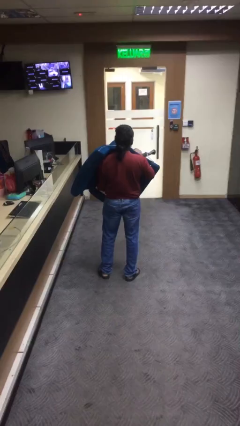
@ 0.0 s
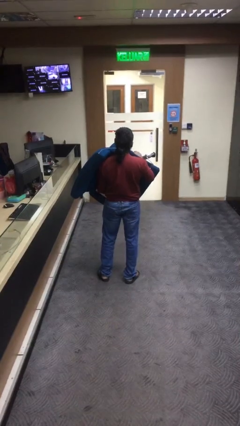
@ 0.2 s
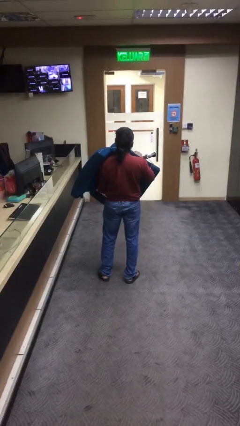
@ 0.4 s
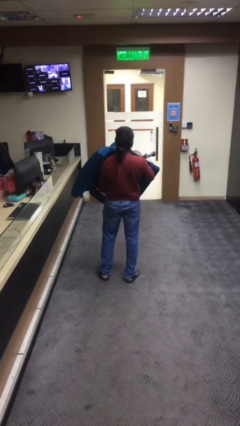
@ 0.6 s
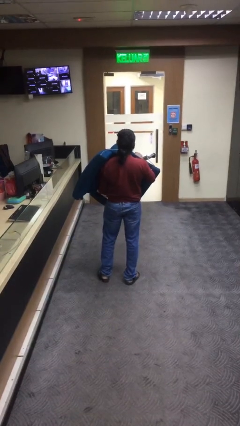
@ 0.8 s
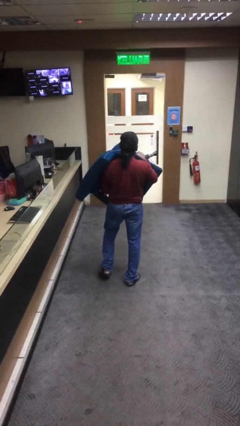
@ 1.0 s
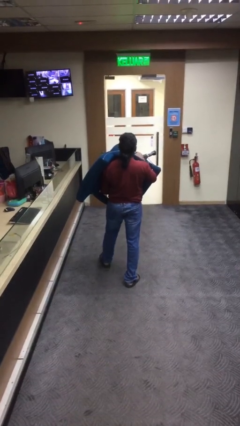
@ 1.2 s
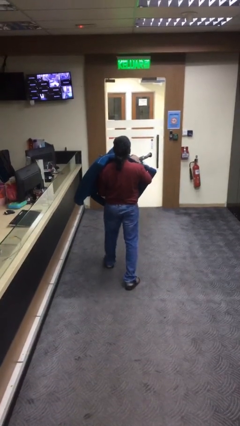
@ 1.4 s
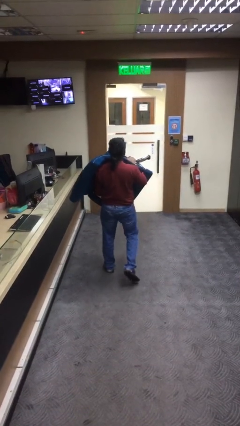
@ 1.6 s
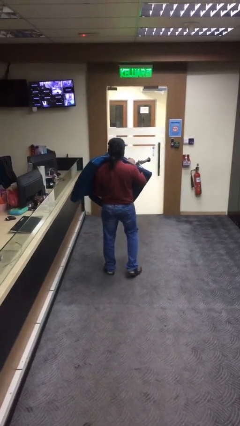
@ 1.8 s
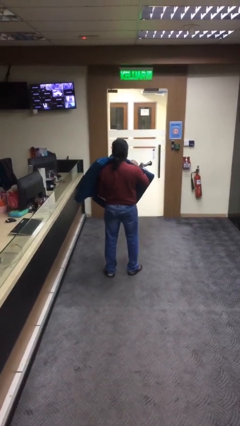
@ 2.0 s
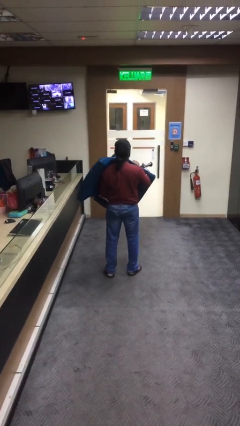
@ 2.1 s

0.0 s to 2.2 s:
person carries furniture

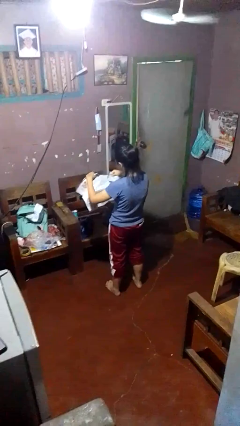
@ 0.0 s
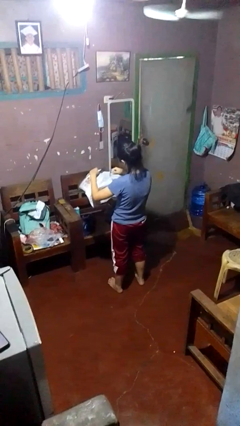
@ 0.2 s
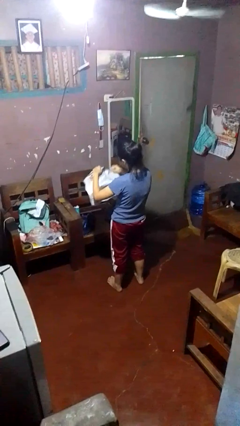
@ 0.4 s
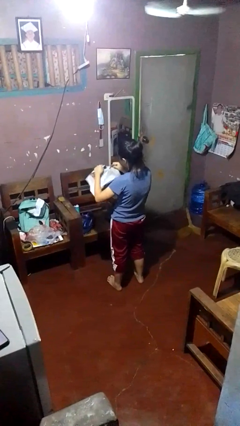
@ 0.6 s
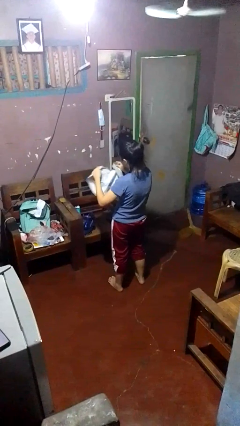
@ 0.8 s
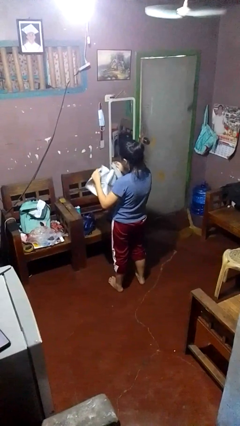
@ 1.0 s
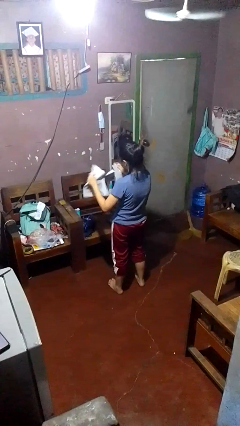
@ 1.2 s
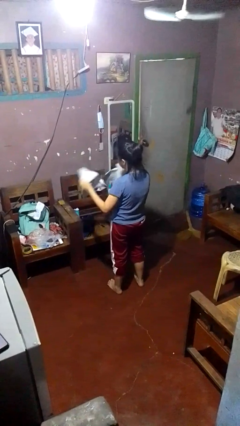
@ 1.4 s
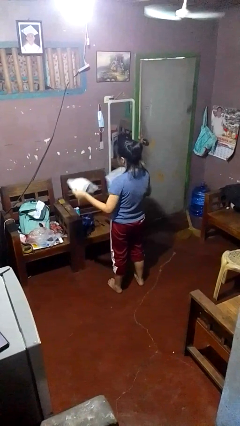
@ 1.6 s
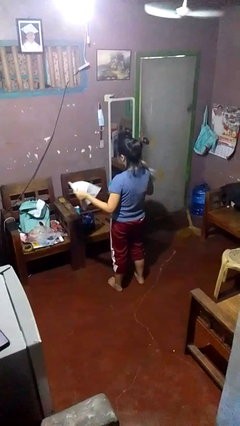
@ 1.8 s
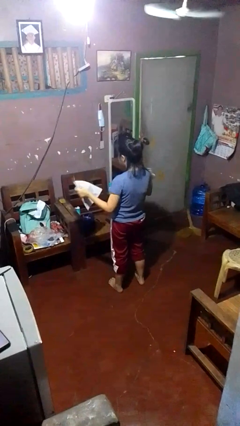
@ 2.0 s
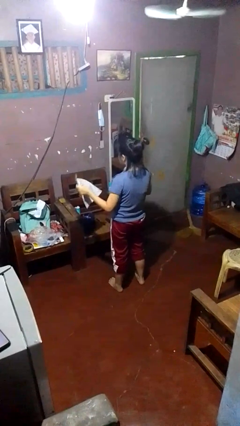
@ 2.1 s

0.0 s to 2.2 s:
person tears paper

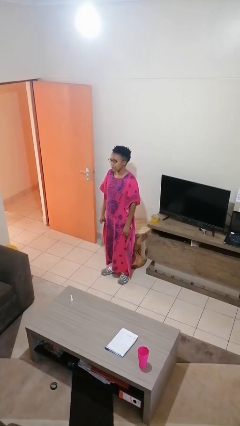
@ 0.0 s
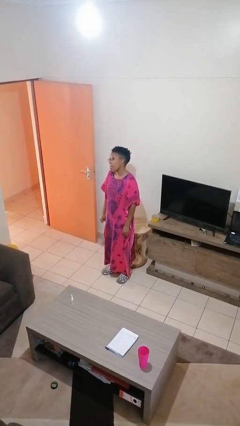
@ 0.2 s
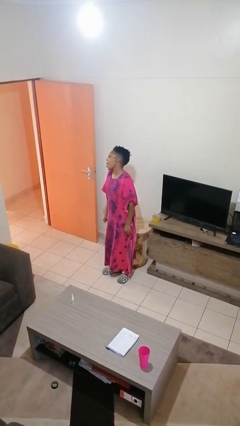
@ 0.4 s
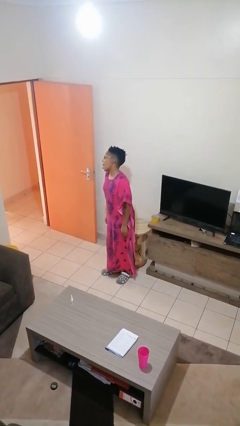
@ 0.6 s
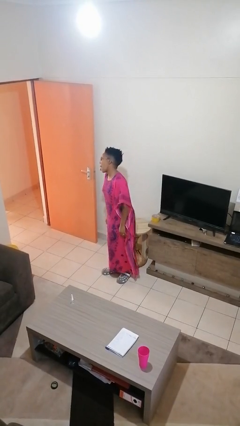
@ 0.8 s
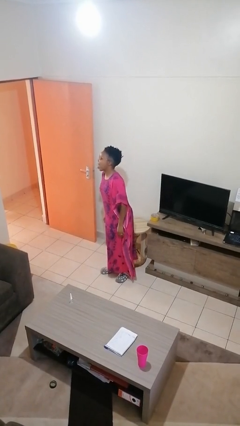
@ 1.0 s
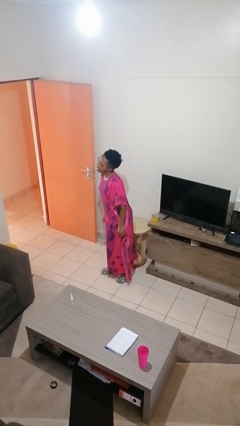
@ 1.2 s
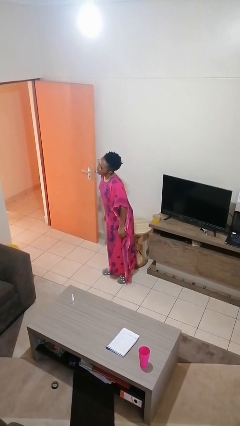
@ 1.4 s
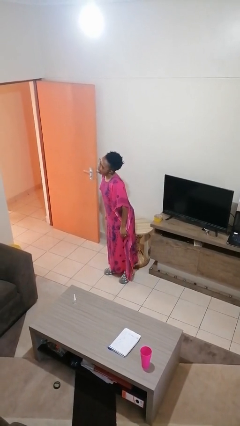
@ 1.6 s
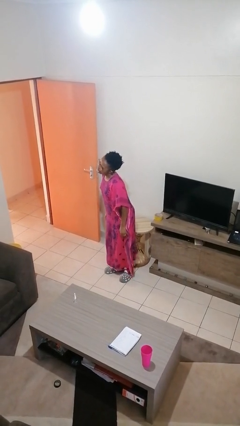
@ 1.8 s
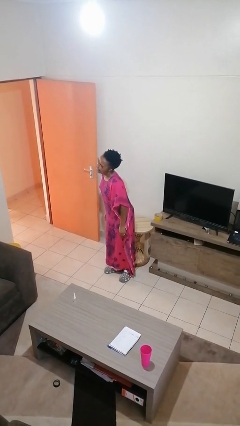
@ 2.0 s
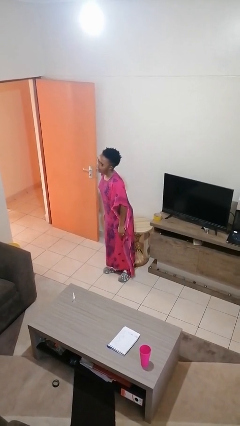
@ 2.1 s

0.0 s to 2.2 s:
person sticks out tongue

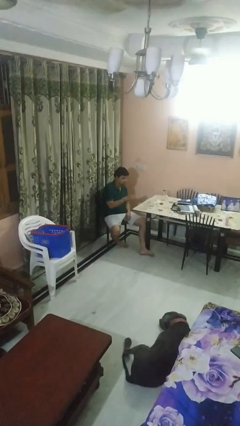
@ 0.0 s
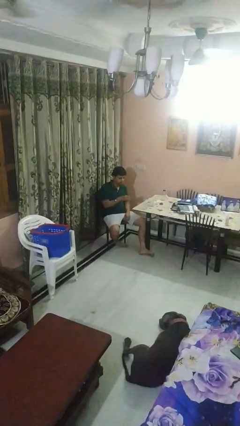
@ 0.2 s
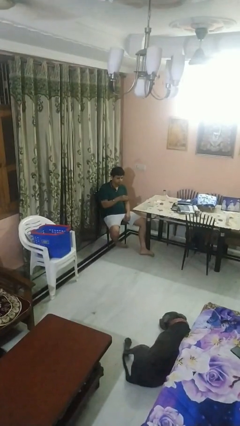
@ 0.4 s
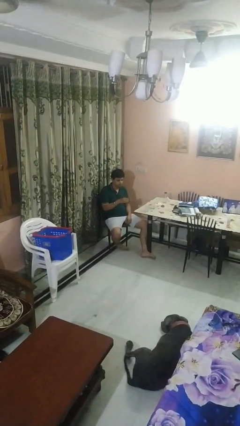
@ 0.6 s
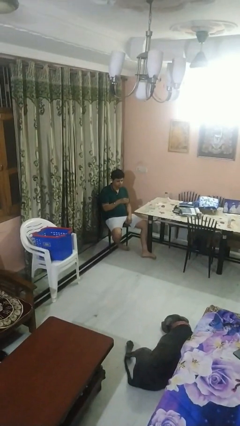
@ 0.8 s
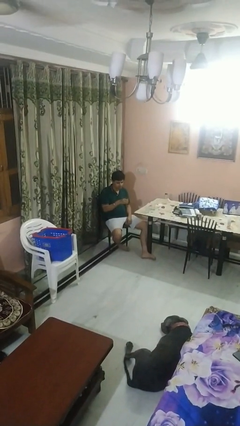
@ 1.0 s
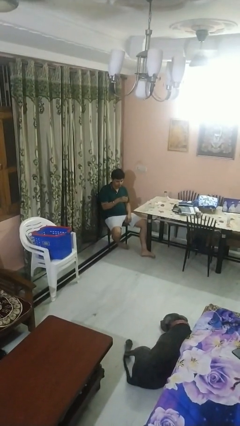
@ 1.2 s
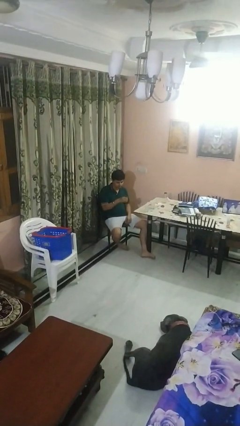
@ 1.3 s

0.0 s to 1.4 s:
person picks up object from table

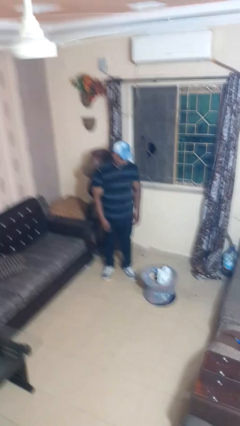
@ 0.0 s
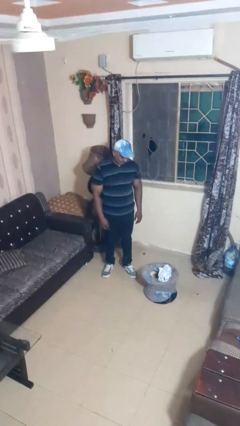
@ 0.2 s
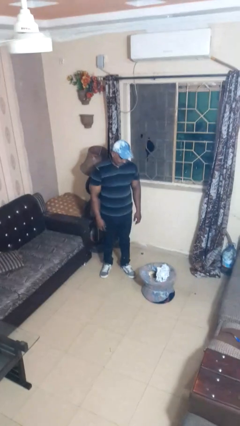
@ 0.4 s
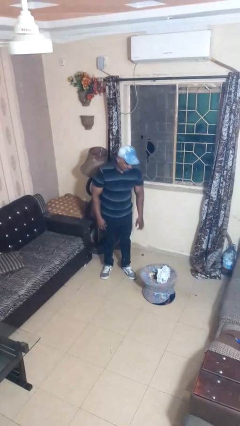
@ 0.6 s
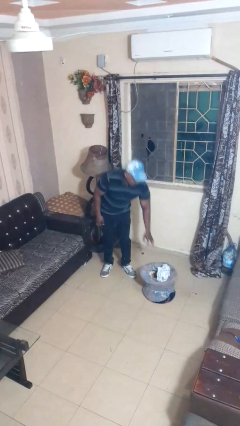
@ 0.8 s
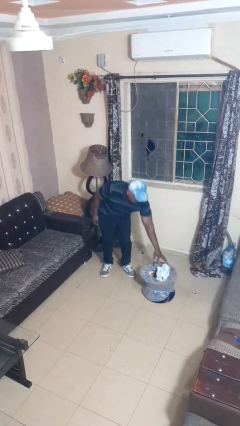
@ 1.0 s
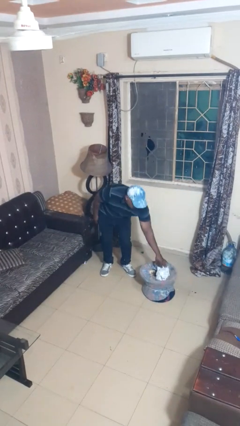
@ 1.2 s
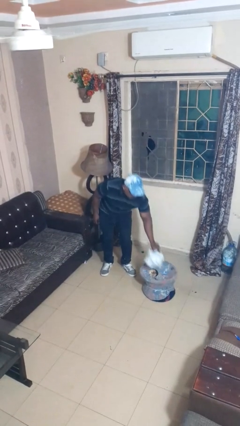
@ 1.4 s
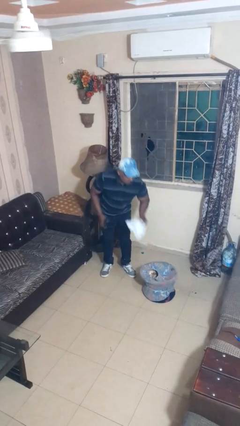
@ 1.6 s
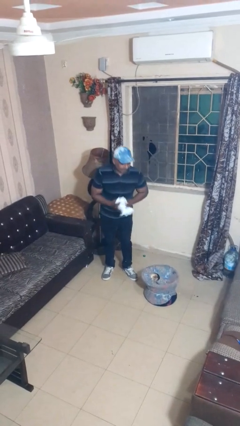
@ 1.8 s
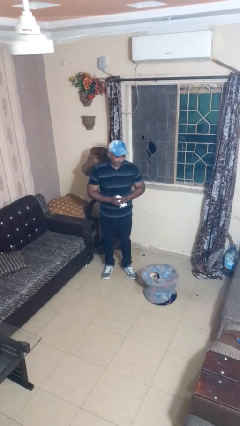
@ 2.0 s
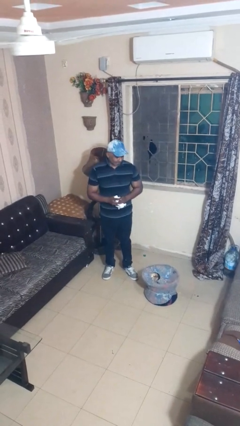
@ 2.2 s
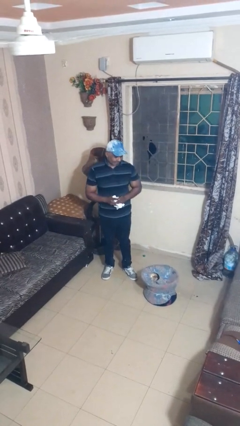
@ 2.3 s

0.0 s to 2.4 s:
person takes object from basket

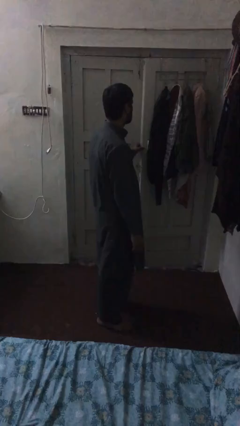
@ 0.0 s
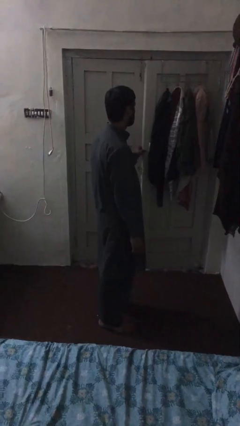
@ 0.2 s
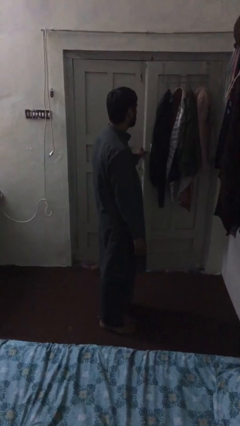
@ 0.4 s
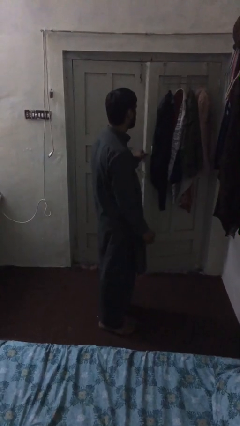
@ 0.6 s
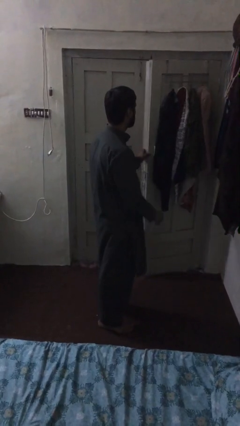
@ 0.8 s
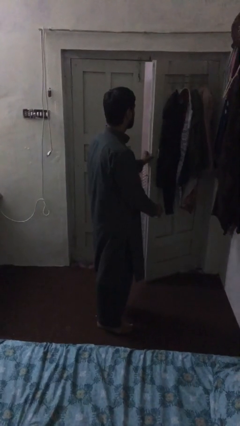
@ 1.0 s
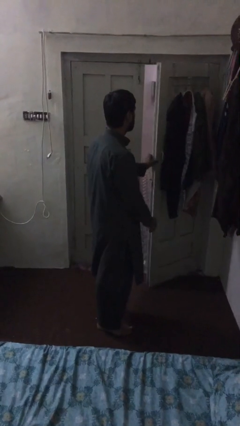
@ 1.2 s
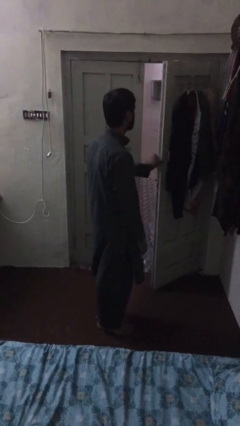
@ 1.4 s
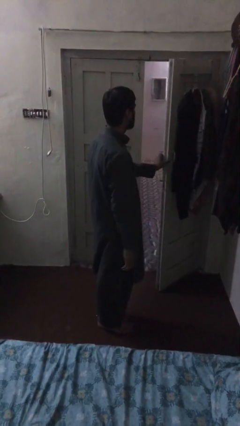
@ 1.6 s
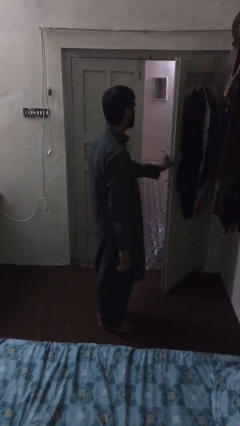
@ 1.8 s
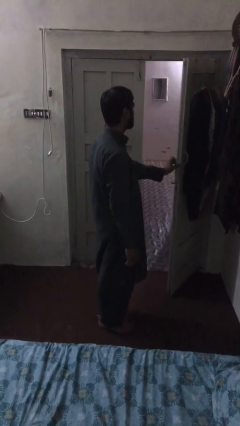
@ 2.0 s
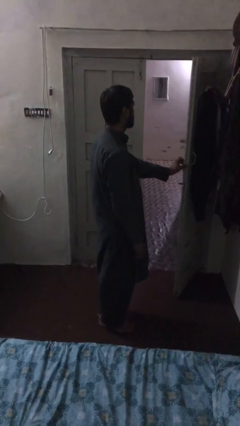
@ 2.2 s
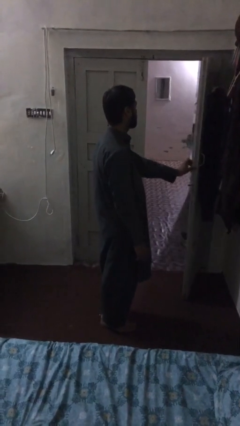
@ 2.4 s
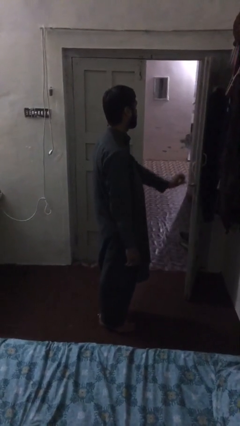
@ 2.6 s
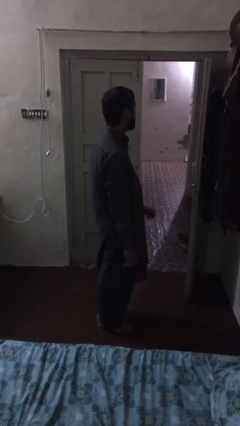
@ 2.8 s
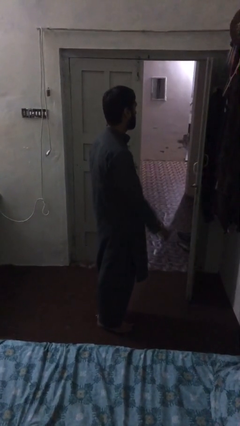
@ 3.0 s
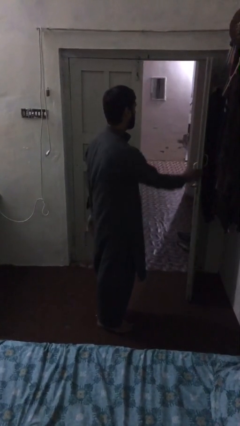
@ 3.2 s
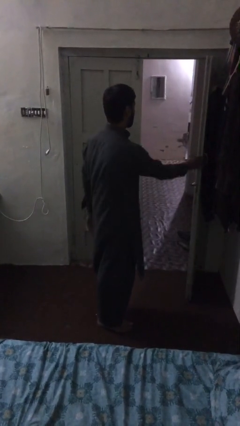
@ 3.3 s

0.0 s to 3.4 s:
person opens facility door

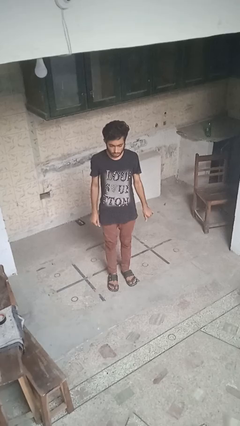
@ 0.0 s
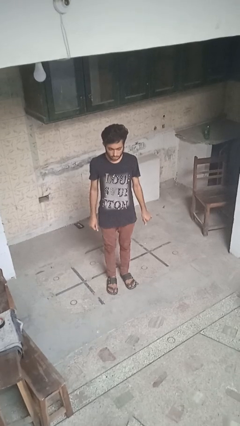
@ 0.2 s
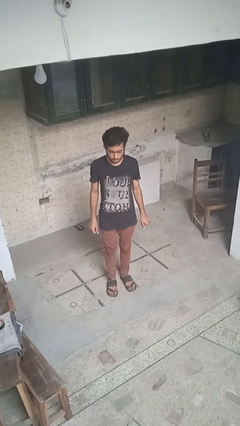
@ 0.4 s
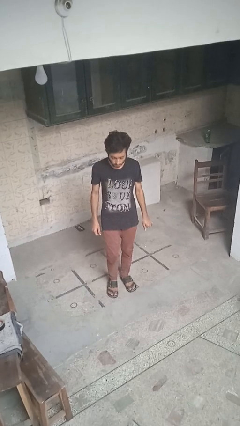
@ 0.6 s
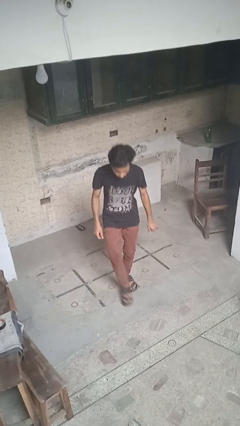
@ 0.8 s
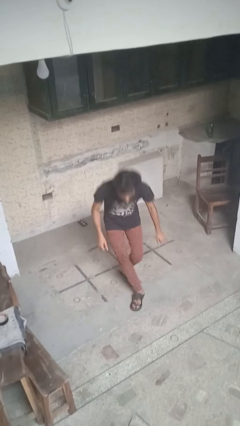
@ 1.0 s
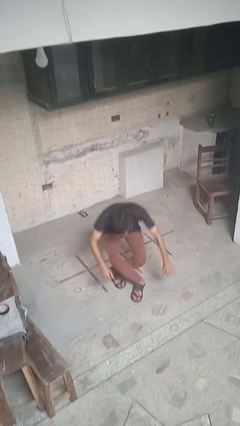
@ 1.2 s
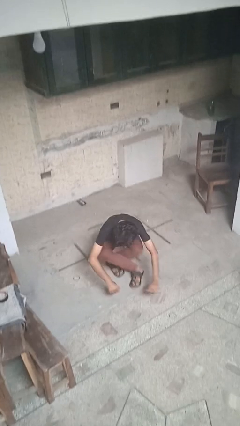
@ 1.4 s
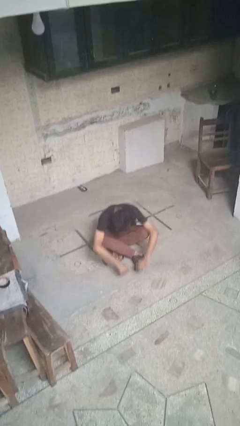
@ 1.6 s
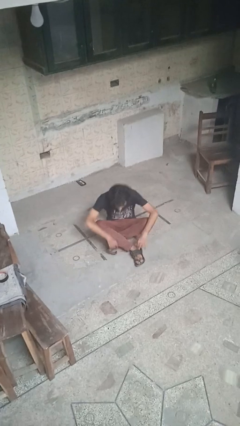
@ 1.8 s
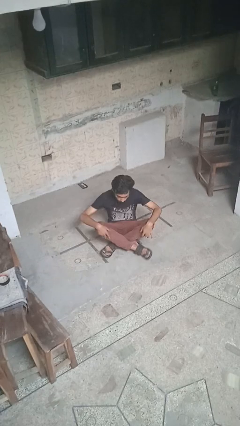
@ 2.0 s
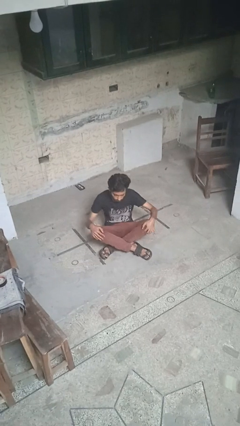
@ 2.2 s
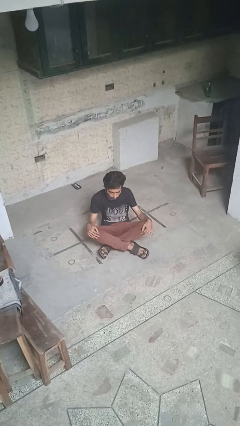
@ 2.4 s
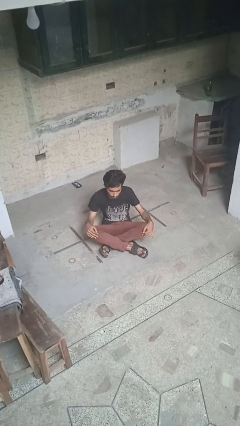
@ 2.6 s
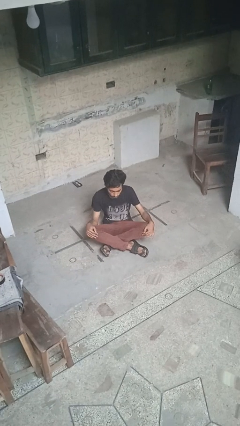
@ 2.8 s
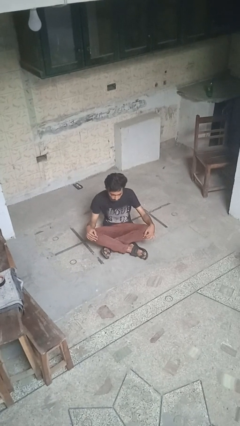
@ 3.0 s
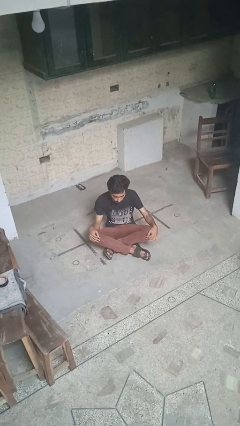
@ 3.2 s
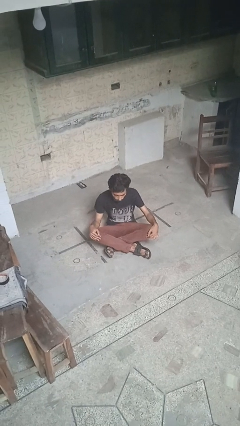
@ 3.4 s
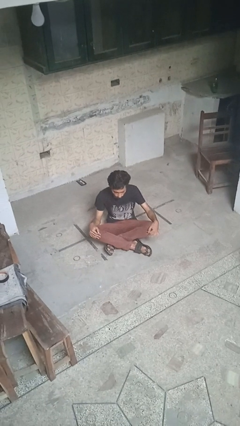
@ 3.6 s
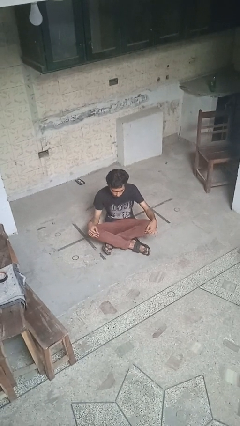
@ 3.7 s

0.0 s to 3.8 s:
person sits crisscross
